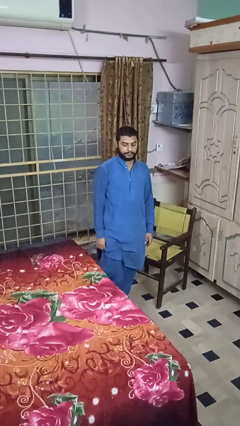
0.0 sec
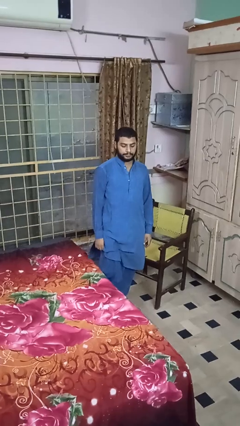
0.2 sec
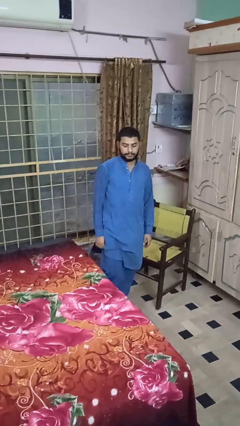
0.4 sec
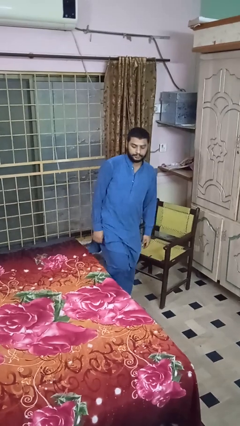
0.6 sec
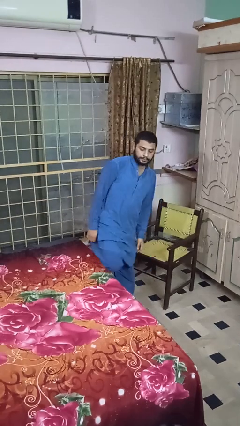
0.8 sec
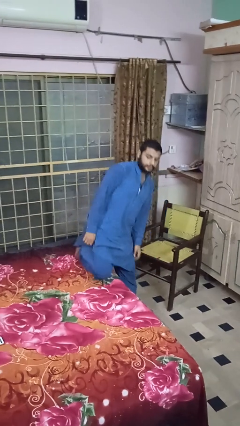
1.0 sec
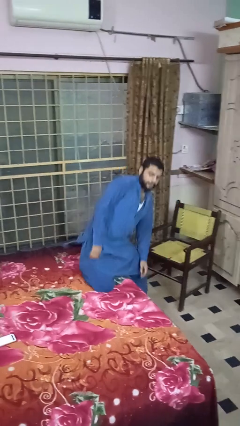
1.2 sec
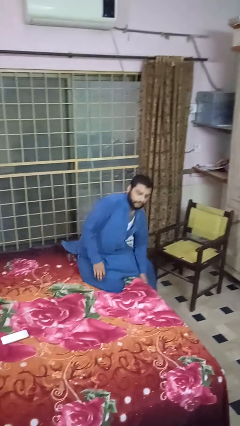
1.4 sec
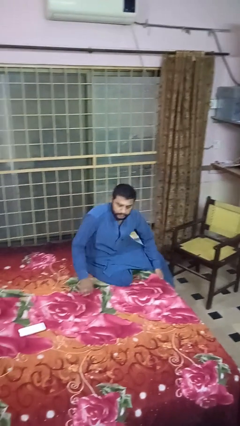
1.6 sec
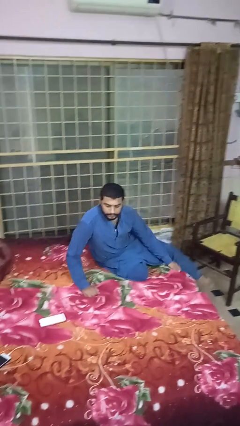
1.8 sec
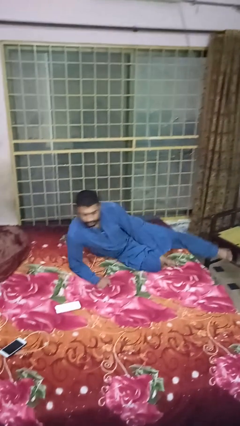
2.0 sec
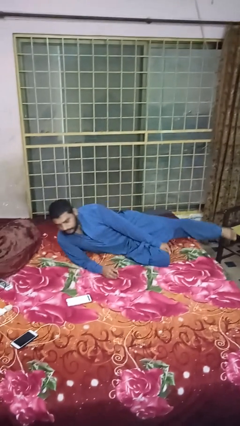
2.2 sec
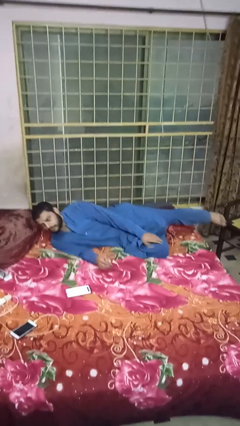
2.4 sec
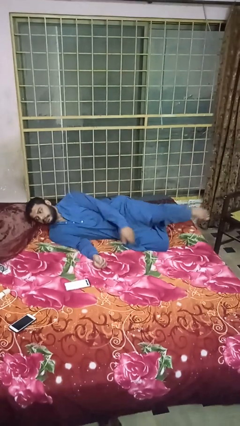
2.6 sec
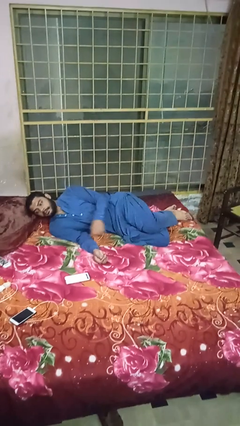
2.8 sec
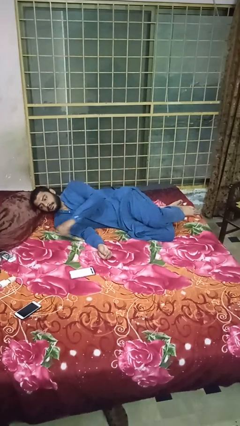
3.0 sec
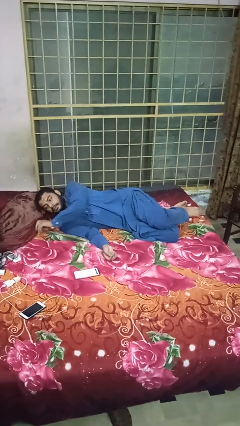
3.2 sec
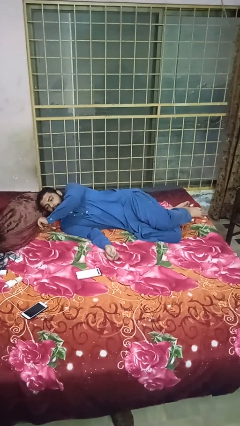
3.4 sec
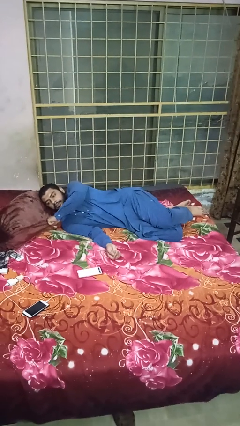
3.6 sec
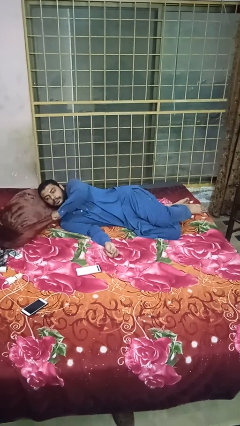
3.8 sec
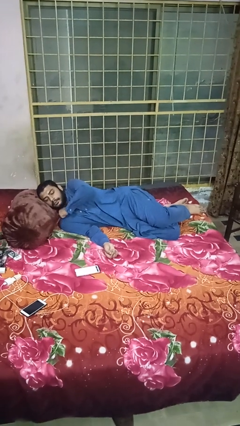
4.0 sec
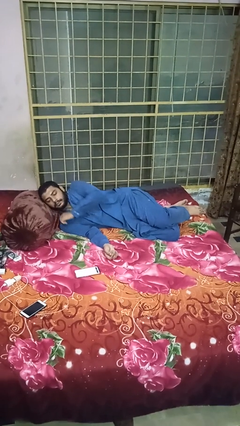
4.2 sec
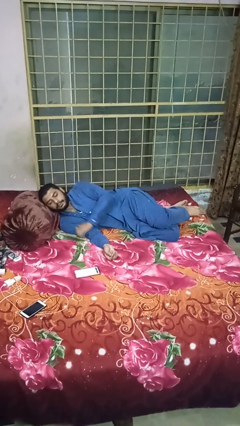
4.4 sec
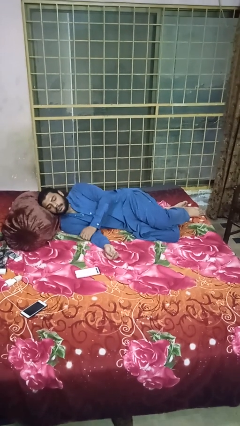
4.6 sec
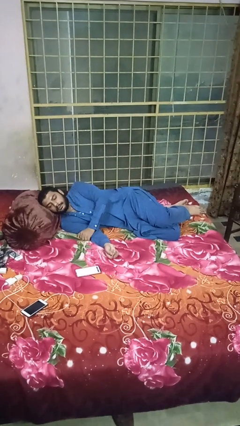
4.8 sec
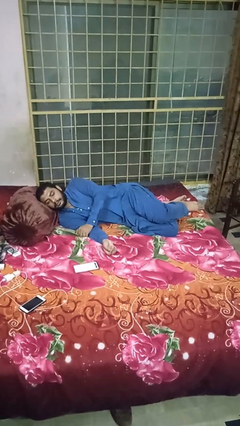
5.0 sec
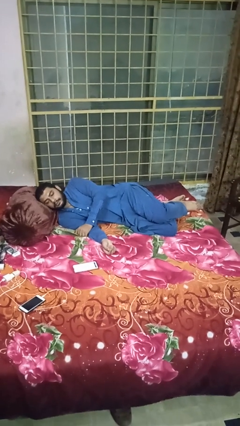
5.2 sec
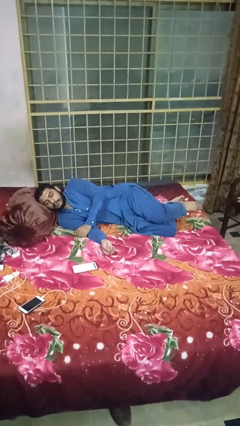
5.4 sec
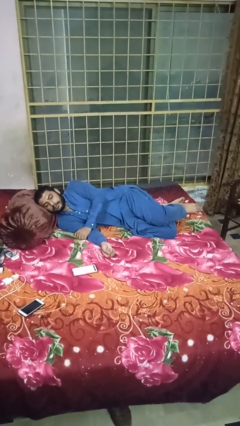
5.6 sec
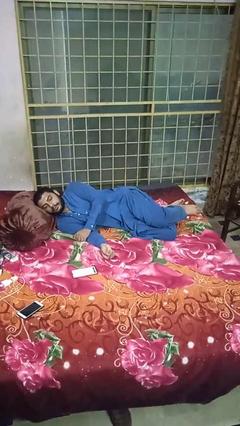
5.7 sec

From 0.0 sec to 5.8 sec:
person lies down on bed

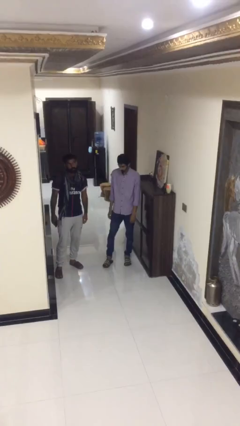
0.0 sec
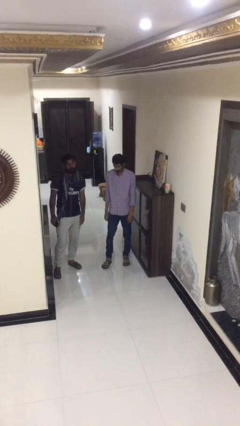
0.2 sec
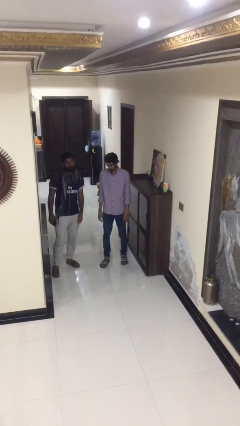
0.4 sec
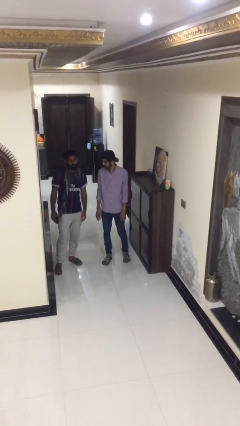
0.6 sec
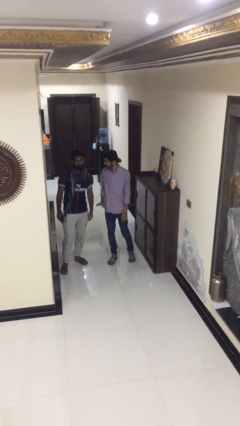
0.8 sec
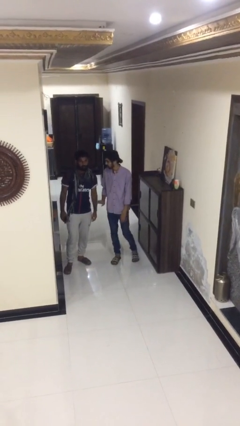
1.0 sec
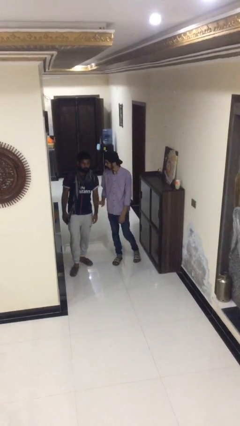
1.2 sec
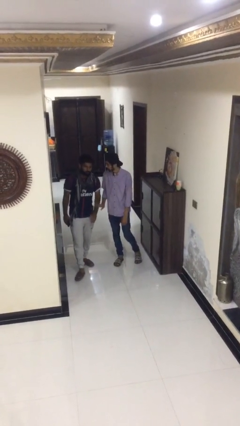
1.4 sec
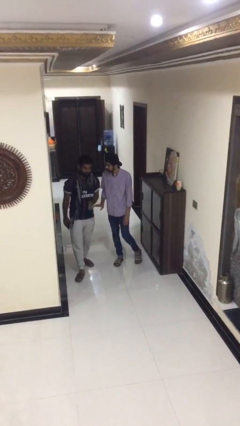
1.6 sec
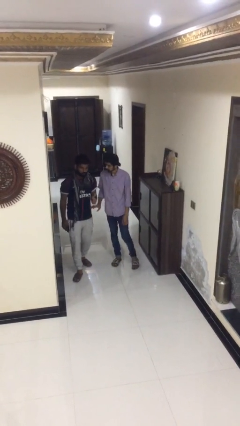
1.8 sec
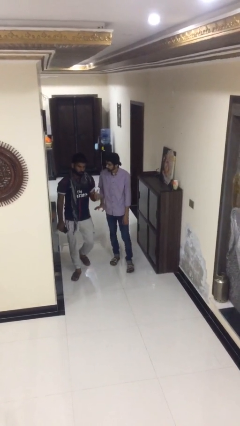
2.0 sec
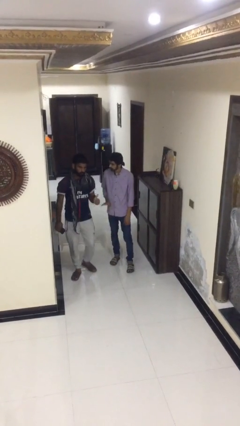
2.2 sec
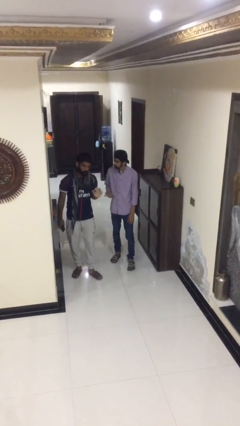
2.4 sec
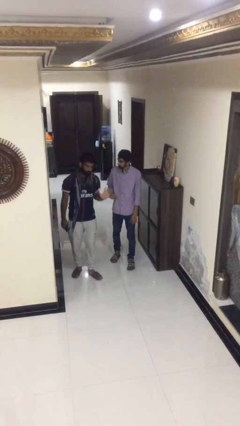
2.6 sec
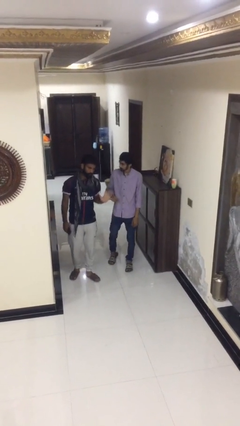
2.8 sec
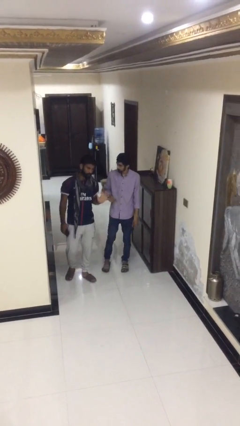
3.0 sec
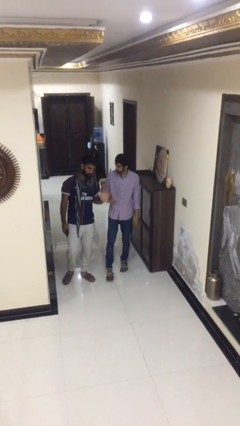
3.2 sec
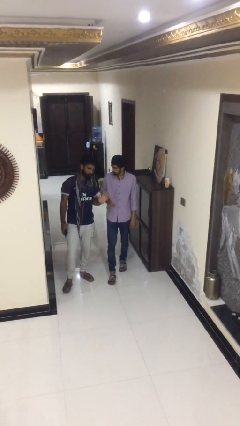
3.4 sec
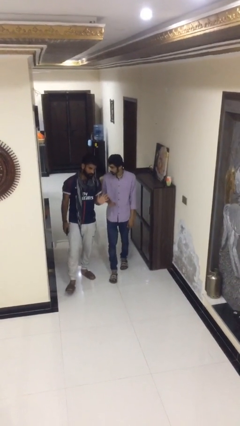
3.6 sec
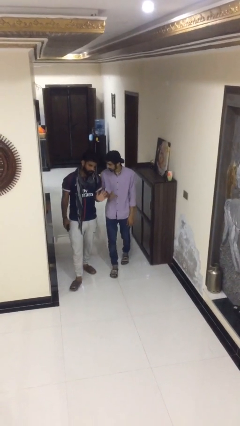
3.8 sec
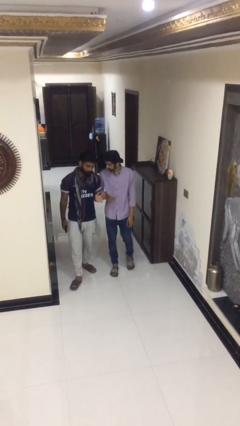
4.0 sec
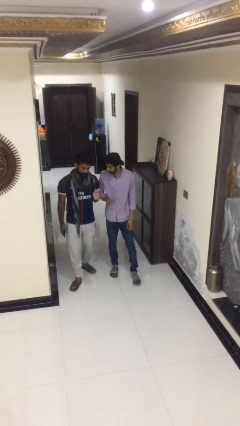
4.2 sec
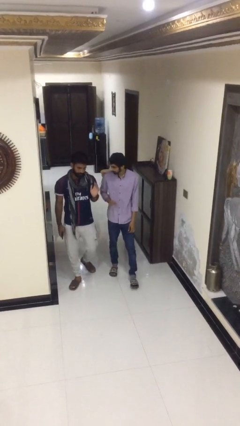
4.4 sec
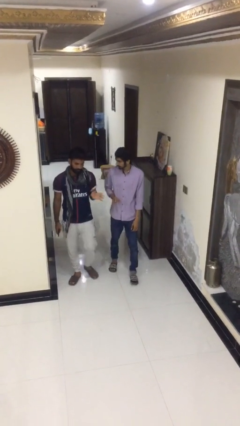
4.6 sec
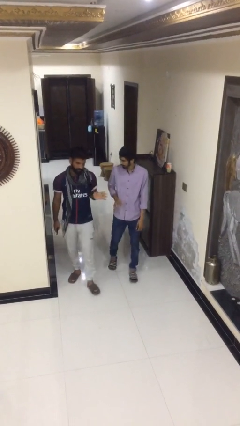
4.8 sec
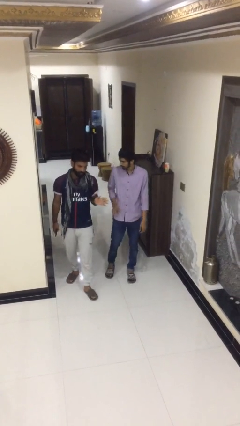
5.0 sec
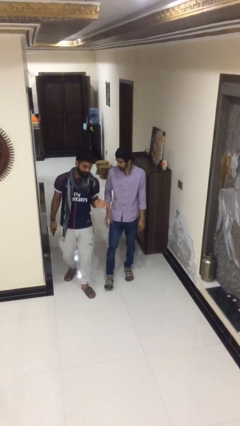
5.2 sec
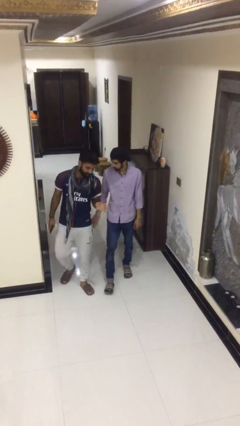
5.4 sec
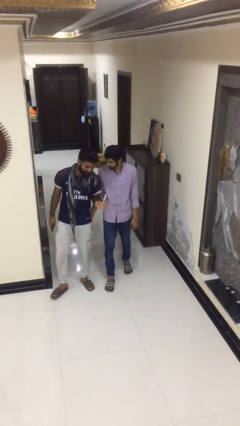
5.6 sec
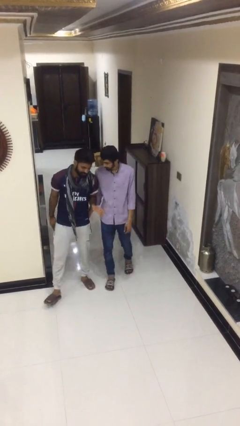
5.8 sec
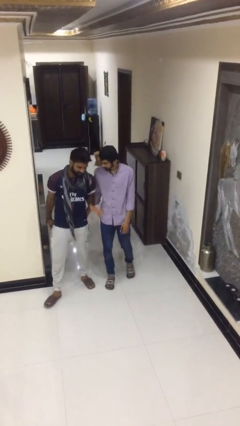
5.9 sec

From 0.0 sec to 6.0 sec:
person talks to person

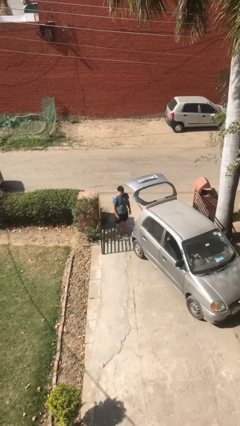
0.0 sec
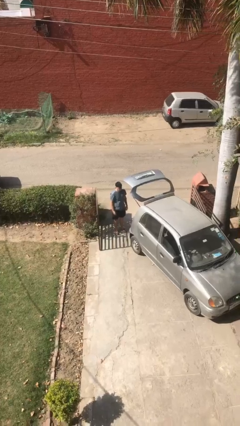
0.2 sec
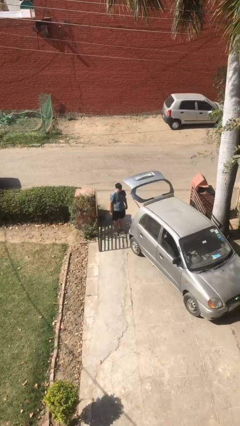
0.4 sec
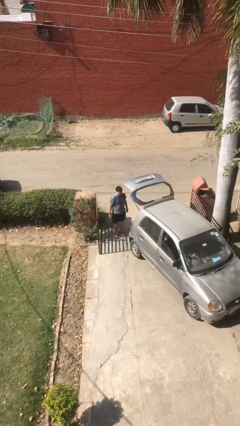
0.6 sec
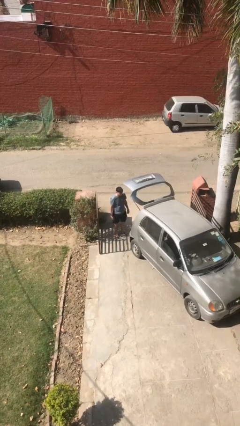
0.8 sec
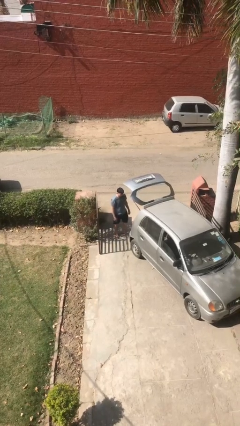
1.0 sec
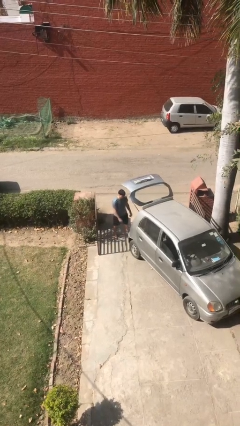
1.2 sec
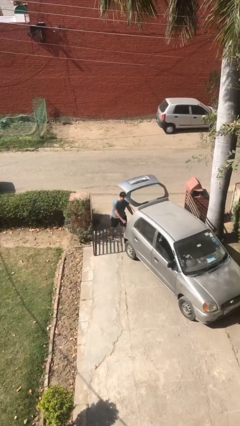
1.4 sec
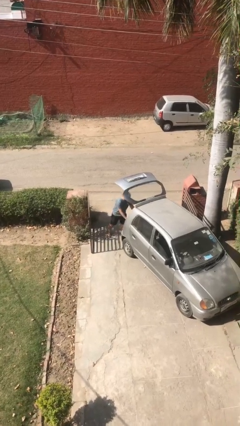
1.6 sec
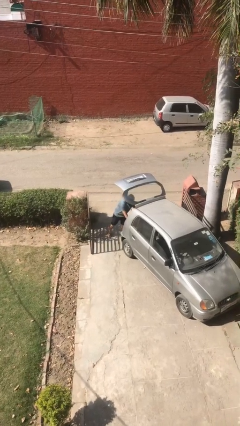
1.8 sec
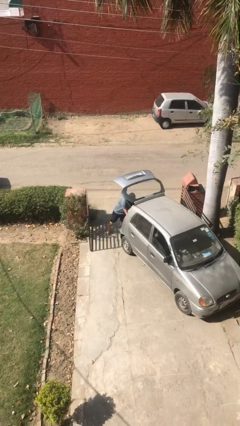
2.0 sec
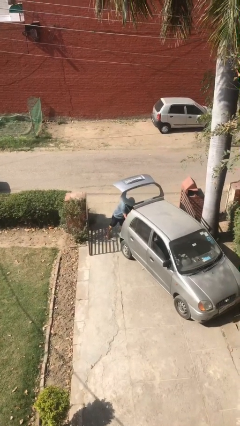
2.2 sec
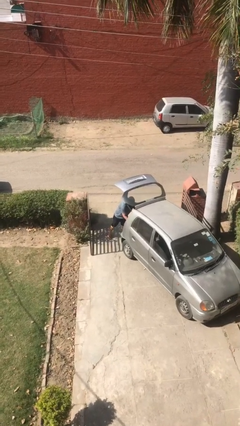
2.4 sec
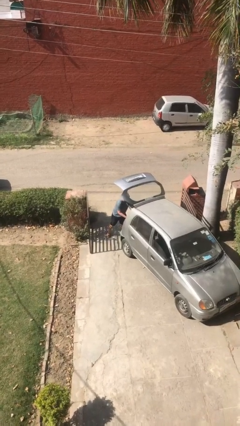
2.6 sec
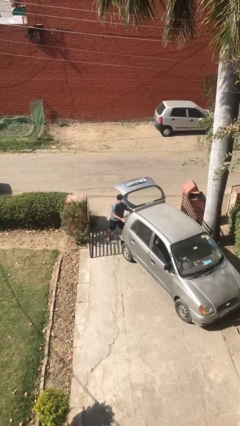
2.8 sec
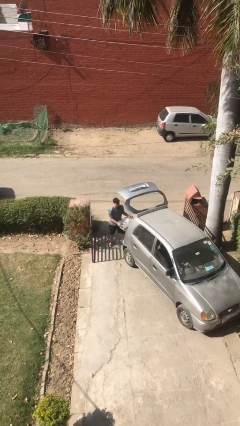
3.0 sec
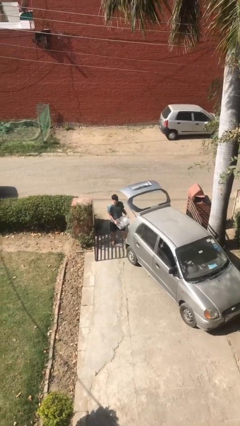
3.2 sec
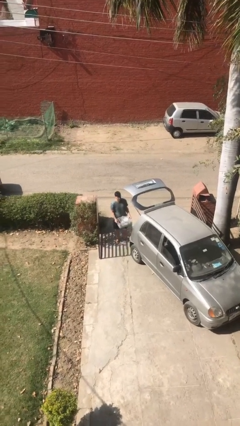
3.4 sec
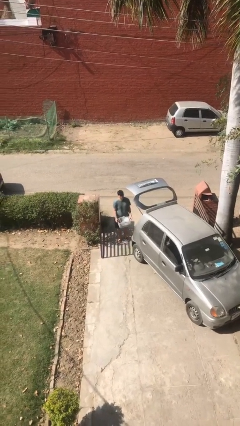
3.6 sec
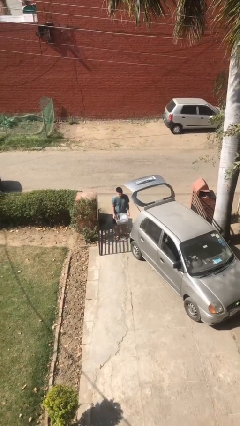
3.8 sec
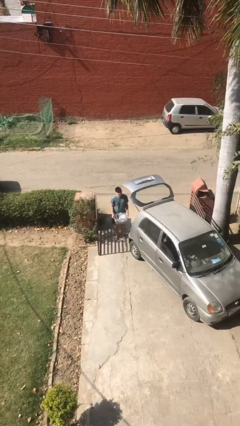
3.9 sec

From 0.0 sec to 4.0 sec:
person unloads car

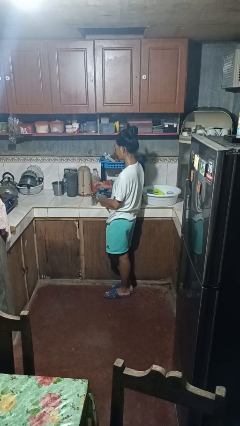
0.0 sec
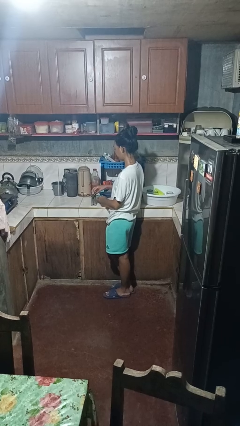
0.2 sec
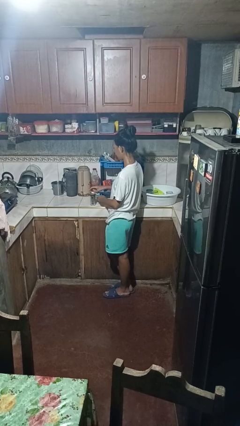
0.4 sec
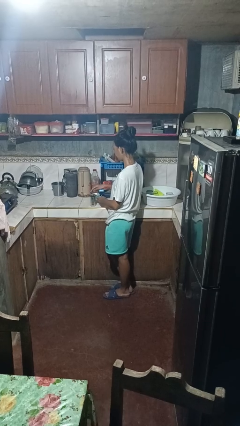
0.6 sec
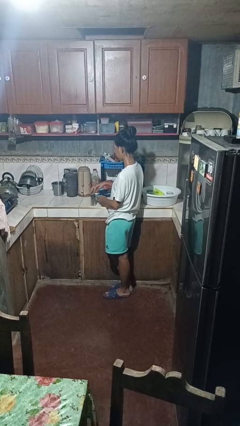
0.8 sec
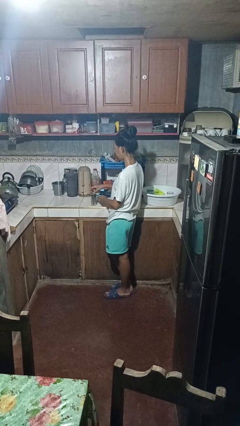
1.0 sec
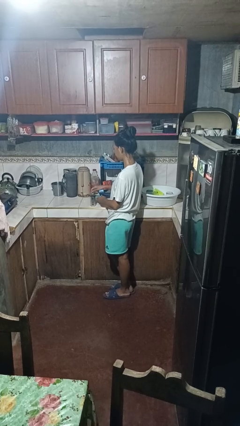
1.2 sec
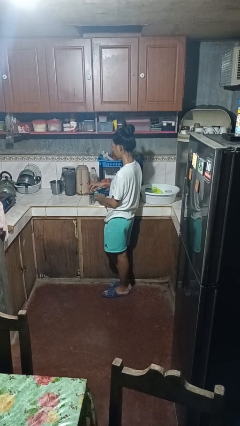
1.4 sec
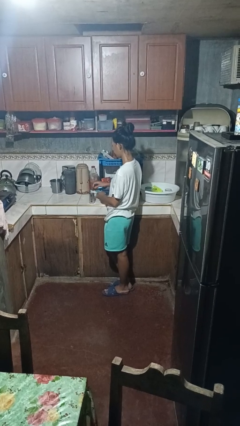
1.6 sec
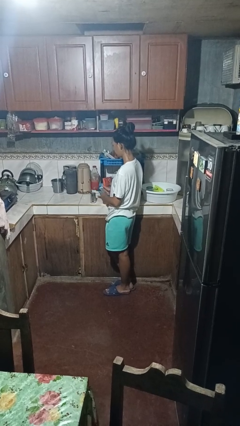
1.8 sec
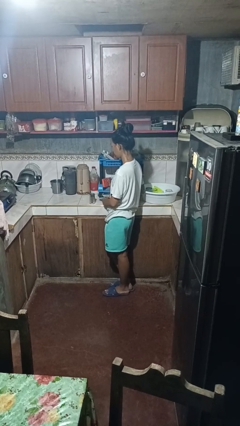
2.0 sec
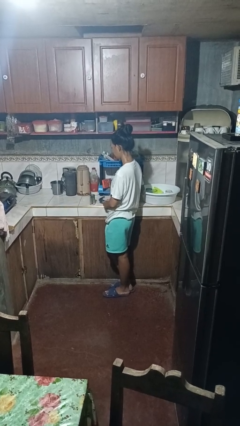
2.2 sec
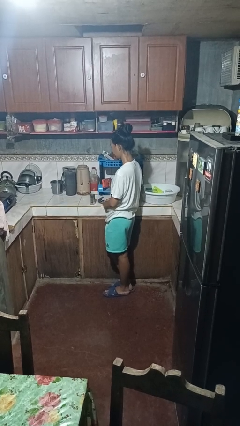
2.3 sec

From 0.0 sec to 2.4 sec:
person opens can with can opener
